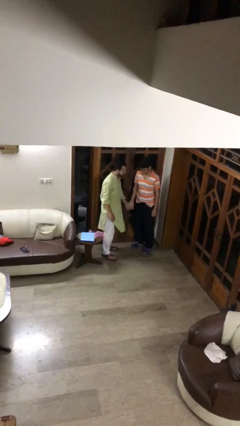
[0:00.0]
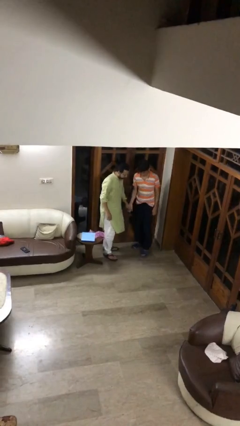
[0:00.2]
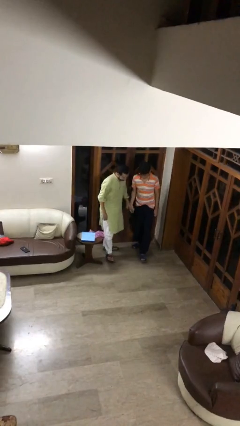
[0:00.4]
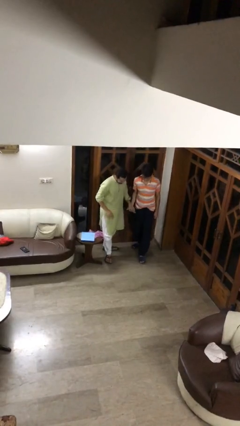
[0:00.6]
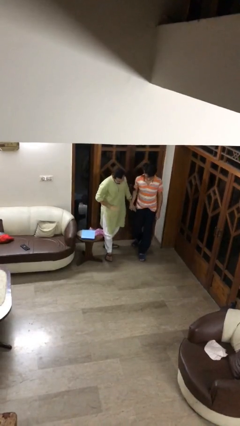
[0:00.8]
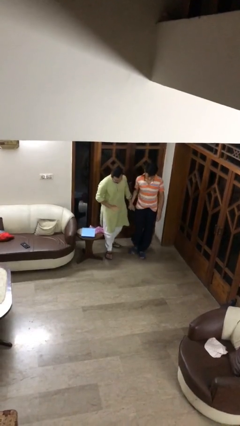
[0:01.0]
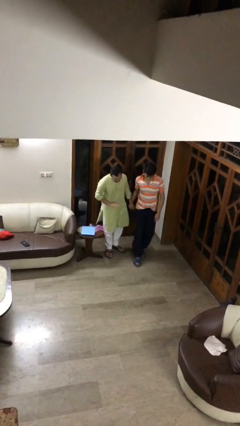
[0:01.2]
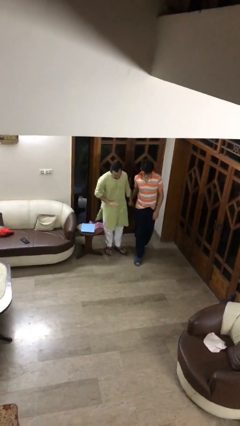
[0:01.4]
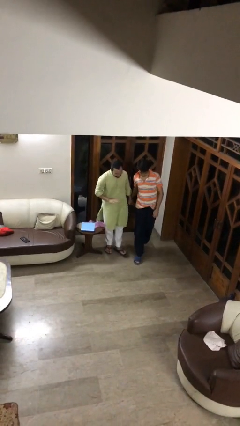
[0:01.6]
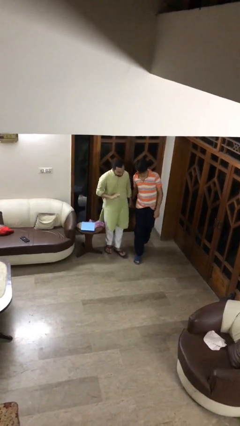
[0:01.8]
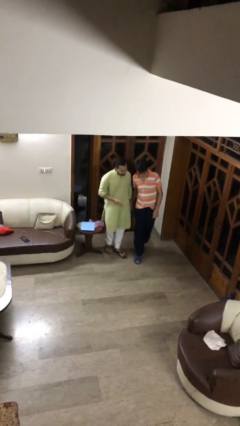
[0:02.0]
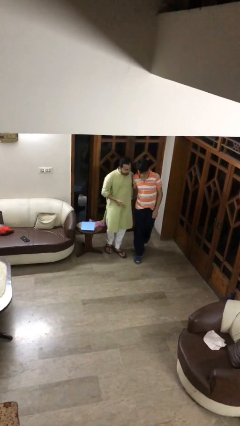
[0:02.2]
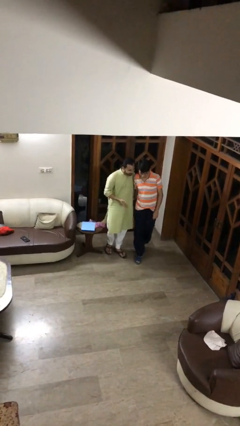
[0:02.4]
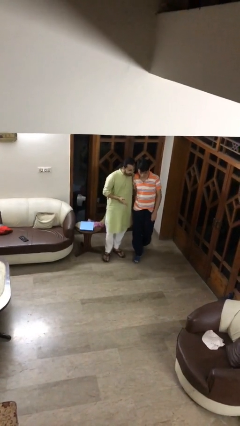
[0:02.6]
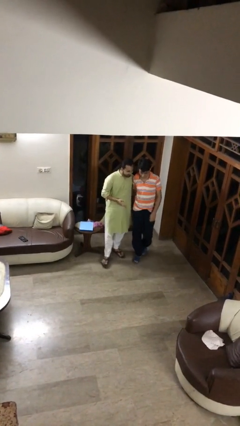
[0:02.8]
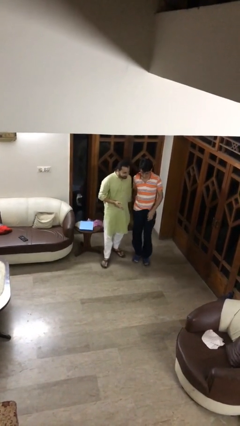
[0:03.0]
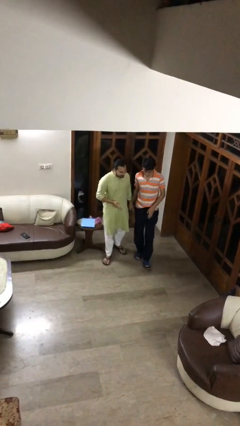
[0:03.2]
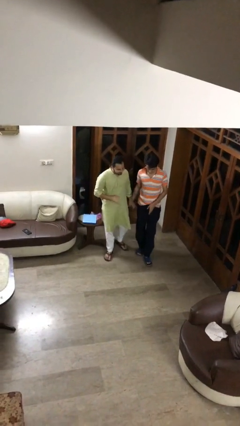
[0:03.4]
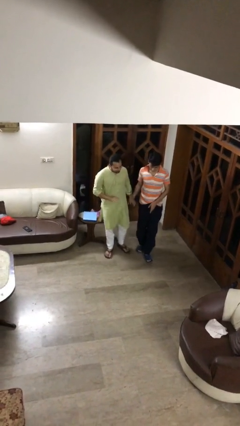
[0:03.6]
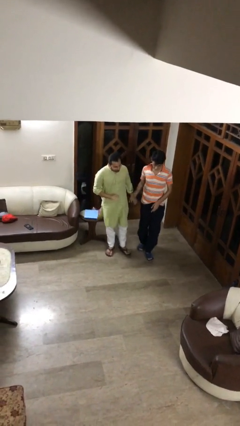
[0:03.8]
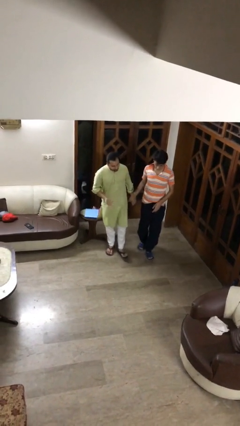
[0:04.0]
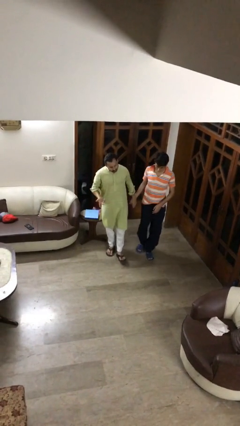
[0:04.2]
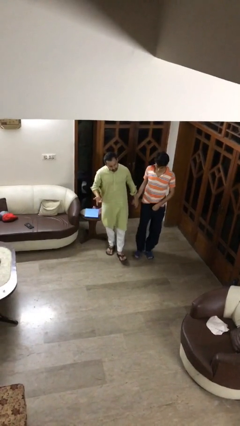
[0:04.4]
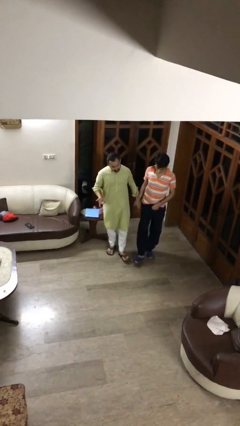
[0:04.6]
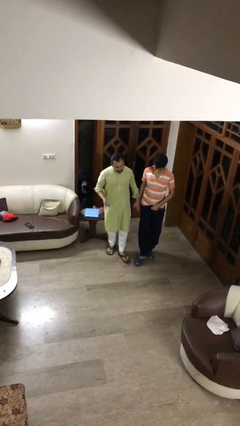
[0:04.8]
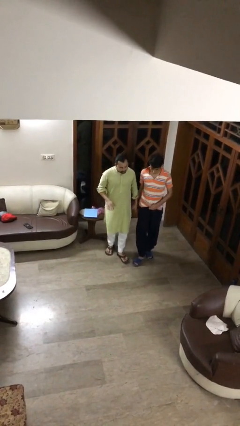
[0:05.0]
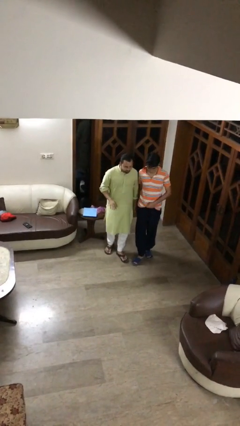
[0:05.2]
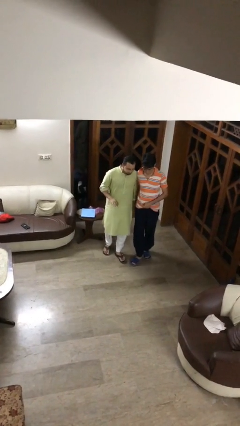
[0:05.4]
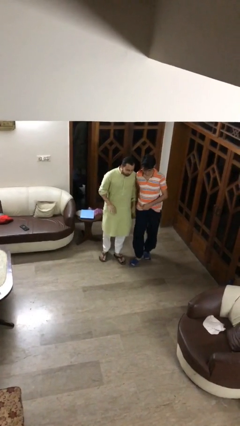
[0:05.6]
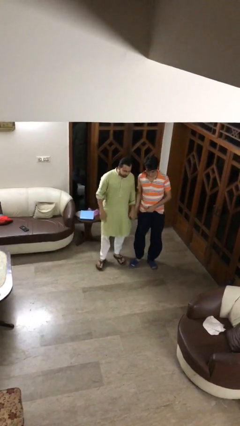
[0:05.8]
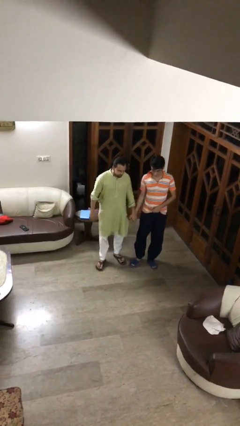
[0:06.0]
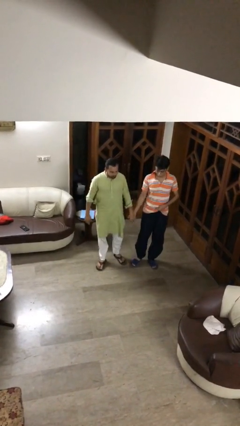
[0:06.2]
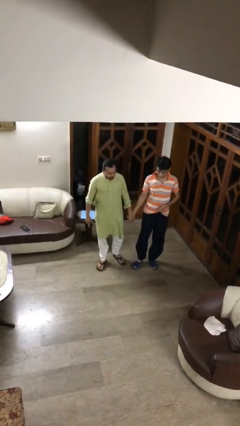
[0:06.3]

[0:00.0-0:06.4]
person holds hand

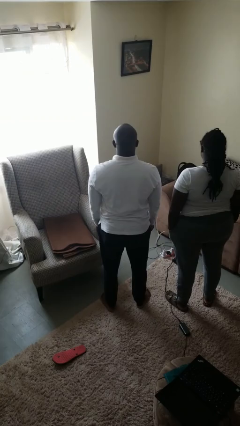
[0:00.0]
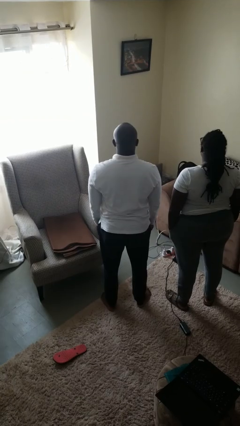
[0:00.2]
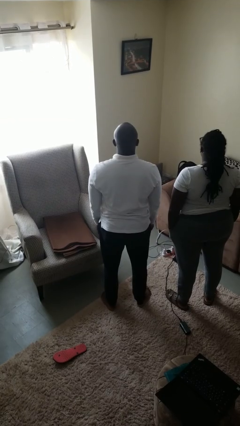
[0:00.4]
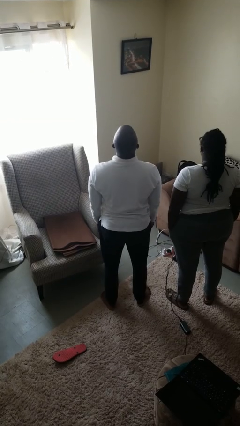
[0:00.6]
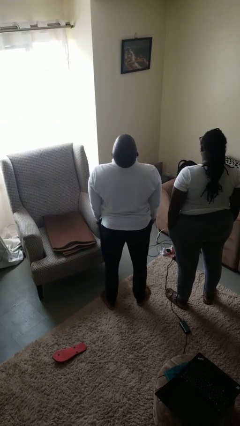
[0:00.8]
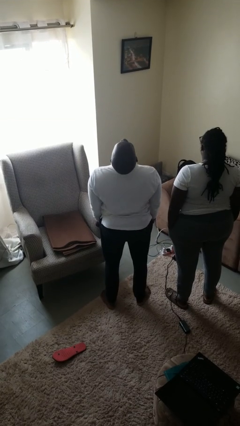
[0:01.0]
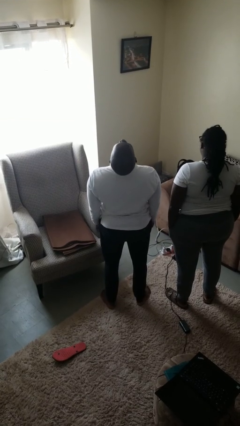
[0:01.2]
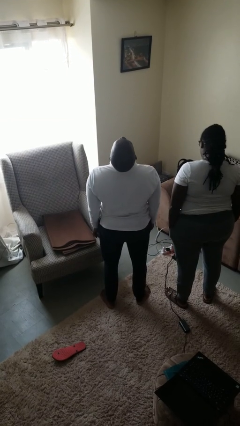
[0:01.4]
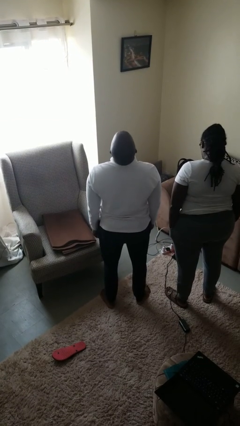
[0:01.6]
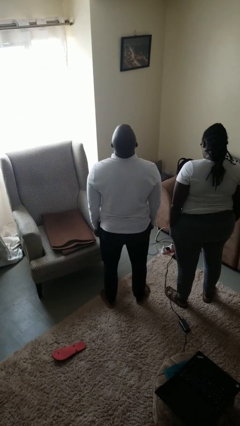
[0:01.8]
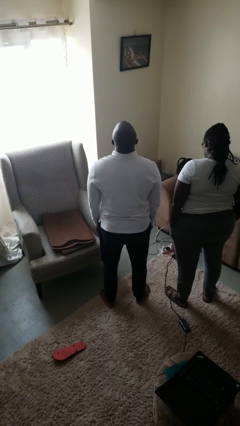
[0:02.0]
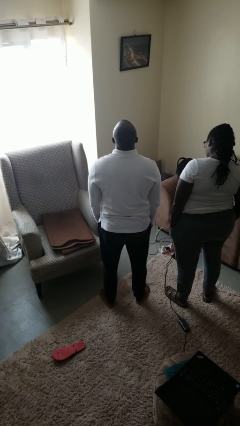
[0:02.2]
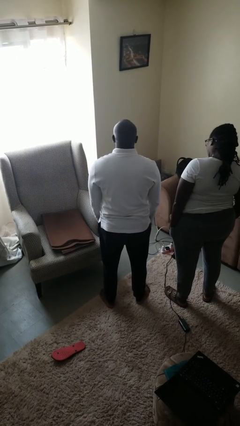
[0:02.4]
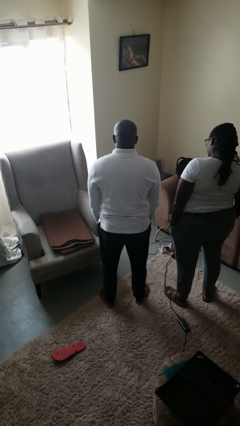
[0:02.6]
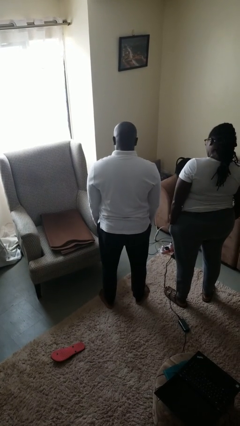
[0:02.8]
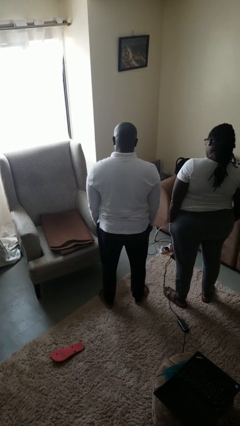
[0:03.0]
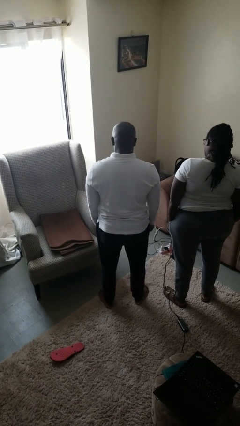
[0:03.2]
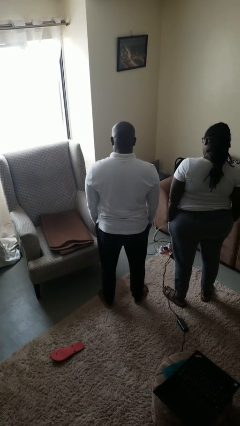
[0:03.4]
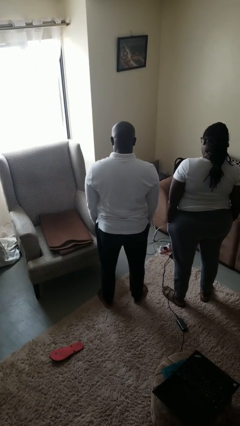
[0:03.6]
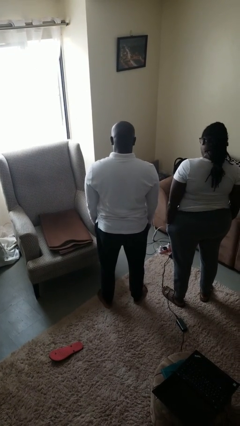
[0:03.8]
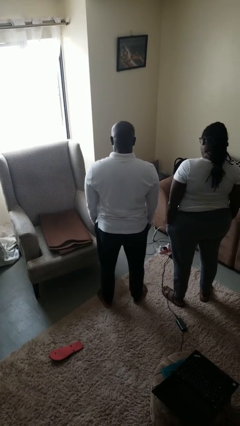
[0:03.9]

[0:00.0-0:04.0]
person laughs with person

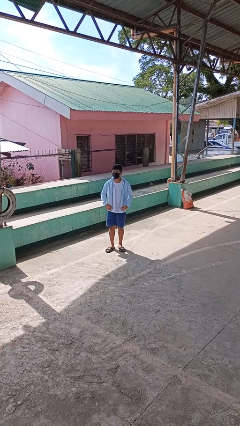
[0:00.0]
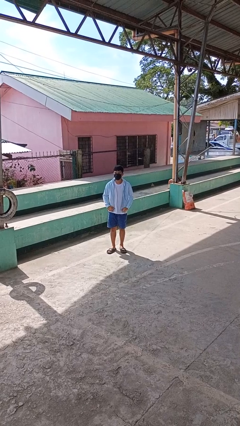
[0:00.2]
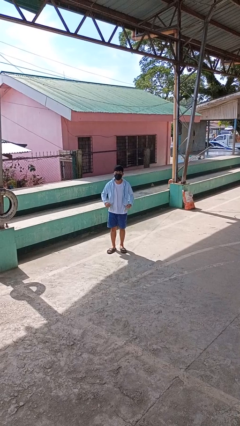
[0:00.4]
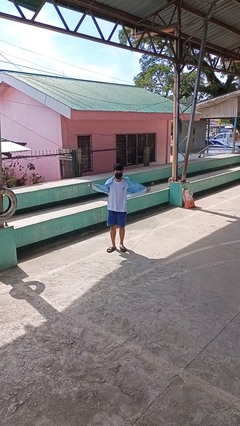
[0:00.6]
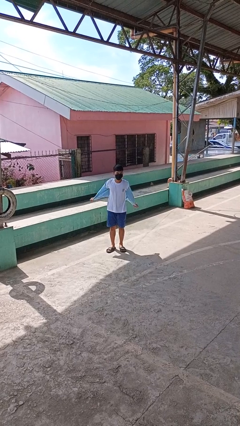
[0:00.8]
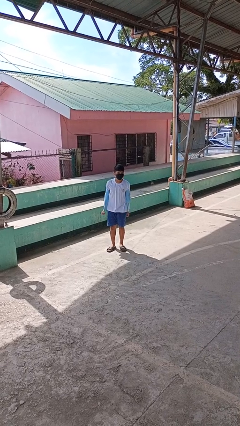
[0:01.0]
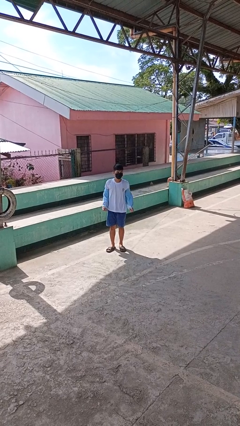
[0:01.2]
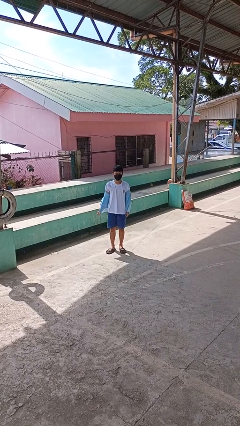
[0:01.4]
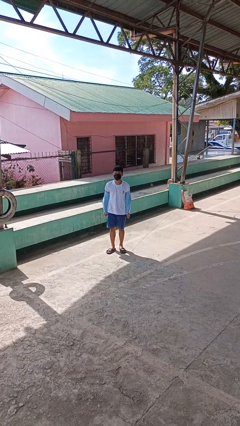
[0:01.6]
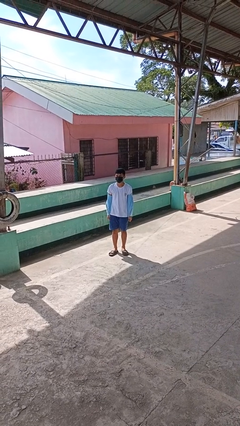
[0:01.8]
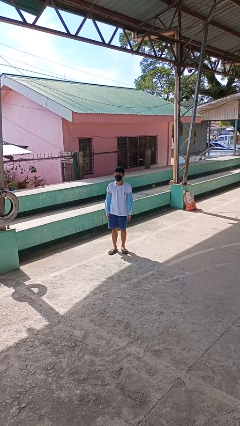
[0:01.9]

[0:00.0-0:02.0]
person takes off jacket

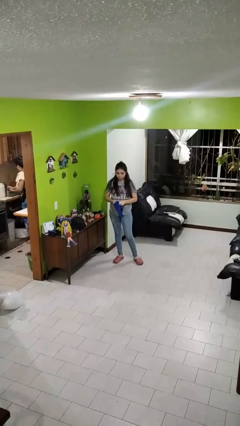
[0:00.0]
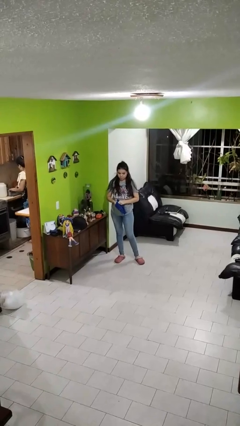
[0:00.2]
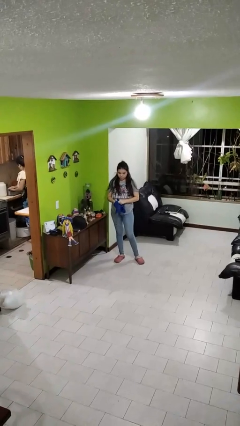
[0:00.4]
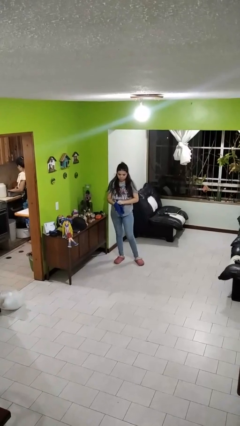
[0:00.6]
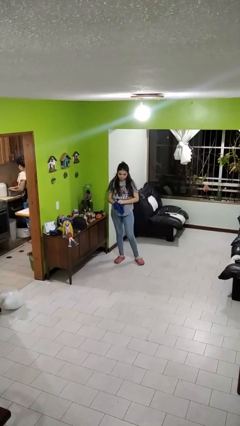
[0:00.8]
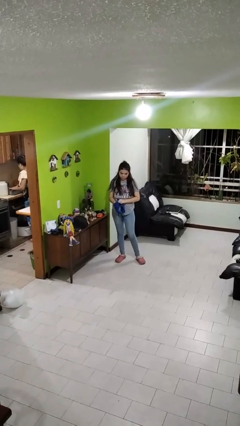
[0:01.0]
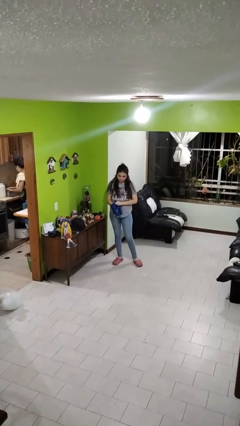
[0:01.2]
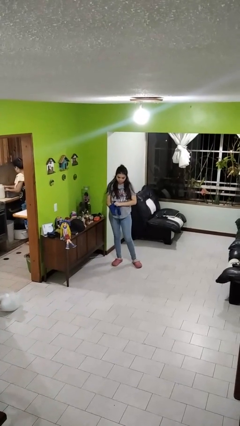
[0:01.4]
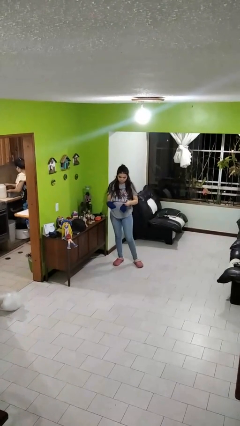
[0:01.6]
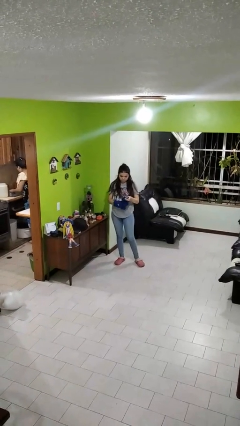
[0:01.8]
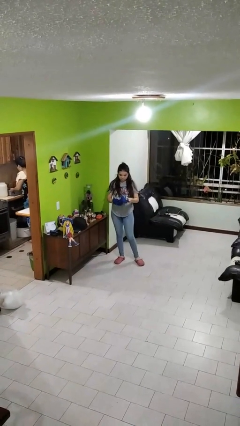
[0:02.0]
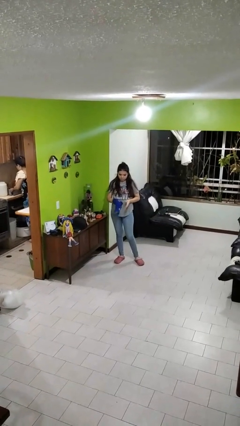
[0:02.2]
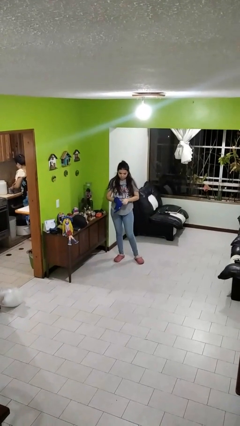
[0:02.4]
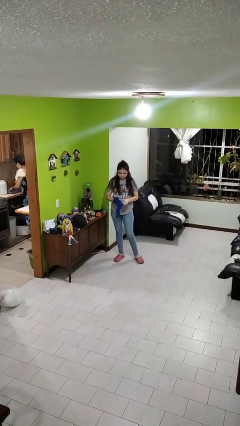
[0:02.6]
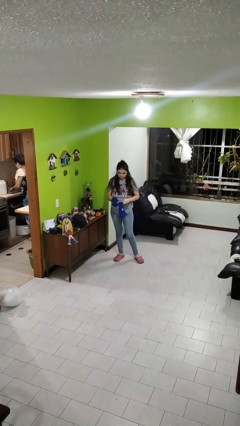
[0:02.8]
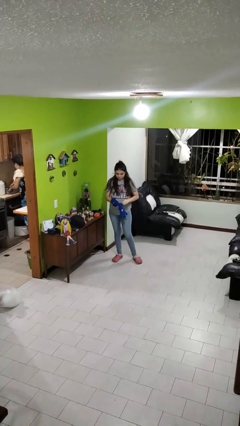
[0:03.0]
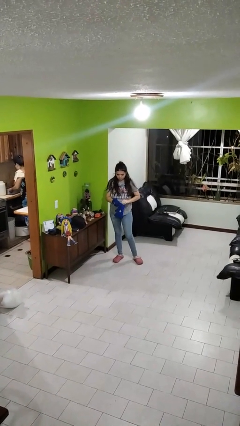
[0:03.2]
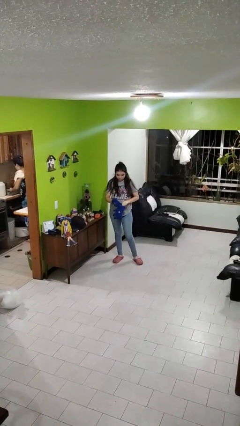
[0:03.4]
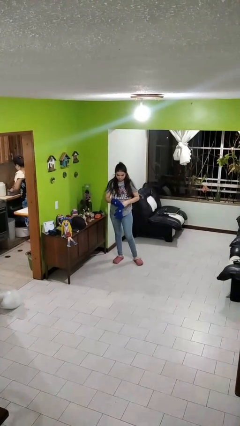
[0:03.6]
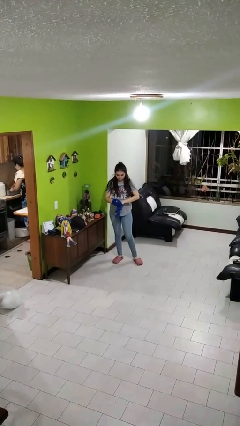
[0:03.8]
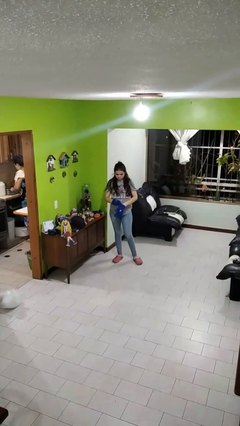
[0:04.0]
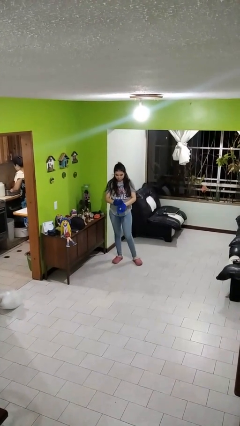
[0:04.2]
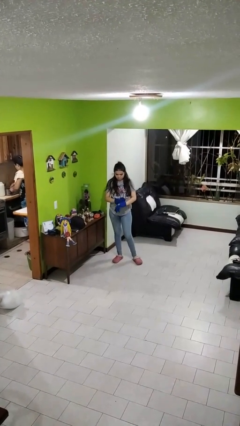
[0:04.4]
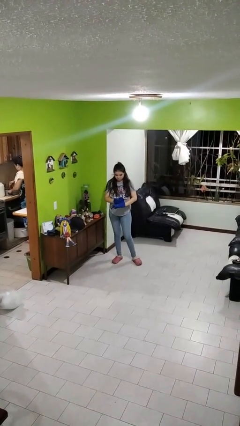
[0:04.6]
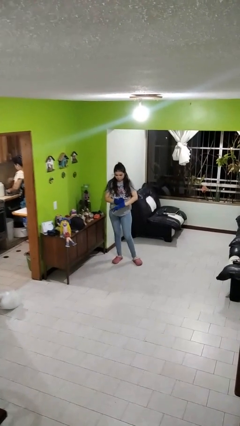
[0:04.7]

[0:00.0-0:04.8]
person puts on gloves

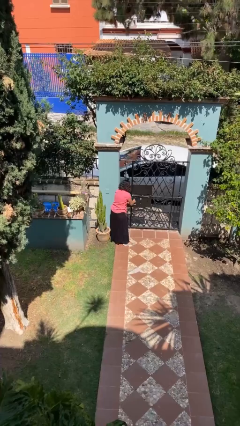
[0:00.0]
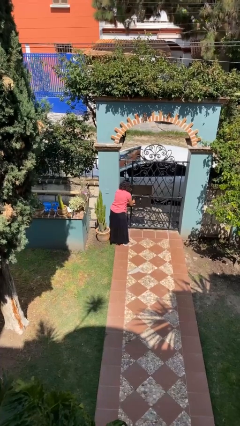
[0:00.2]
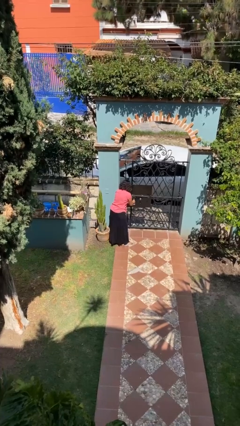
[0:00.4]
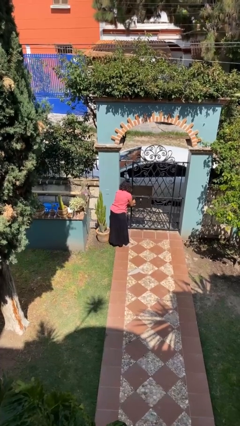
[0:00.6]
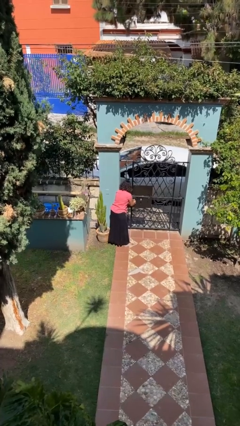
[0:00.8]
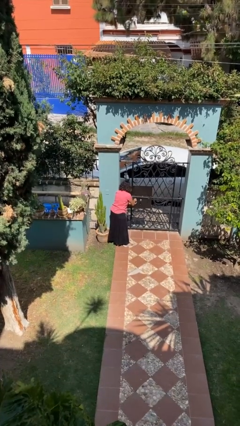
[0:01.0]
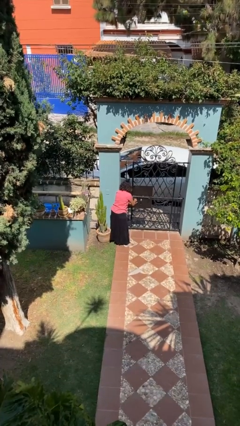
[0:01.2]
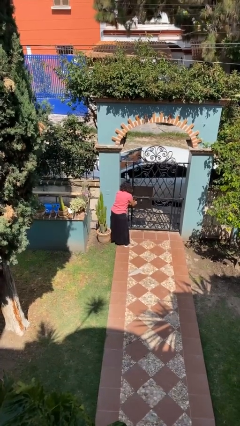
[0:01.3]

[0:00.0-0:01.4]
person unlocks door with keys
